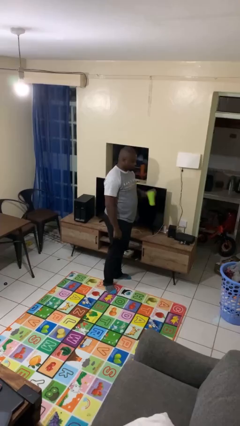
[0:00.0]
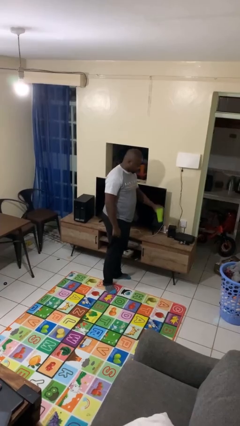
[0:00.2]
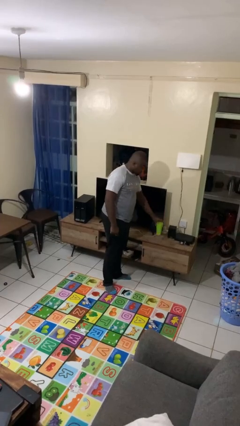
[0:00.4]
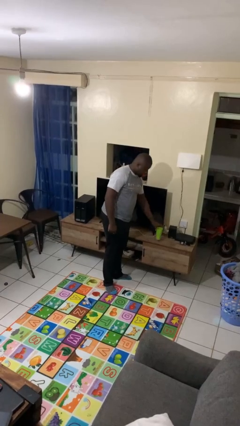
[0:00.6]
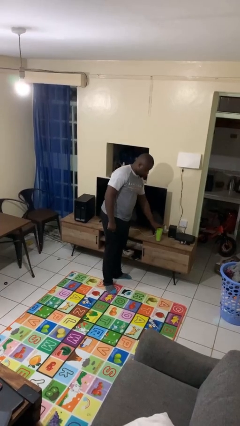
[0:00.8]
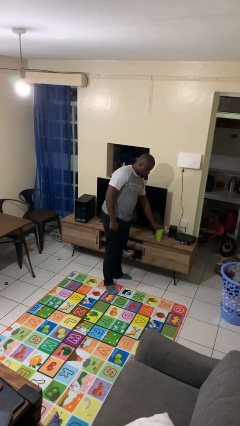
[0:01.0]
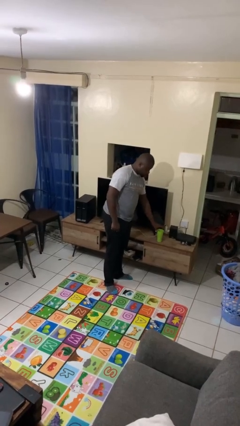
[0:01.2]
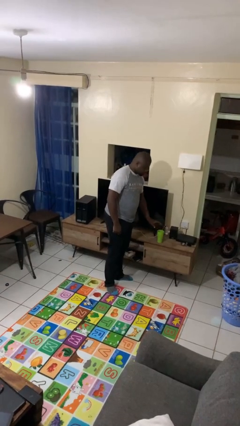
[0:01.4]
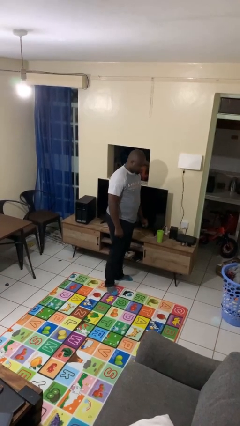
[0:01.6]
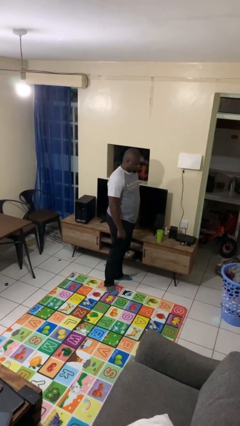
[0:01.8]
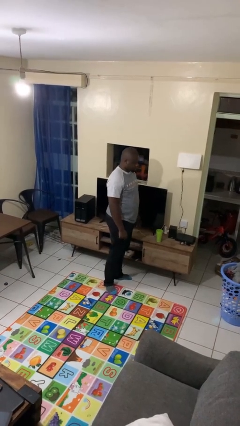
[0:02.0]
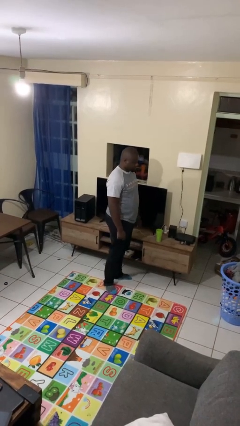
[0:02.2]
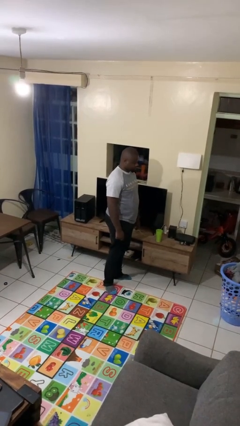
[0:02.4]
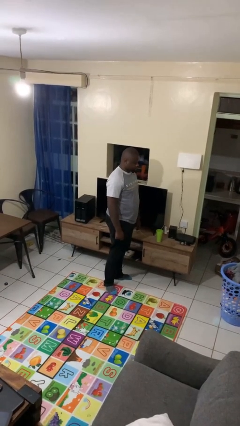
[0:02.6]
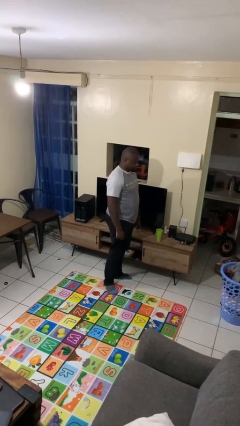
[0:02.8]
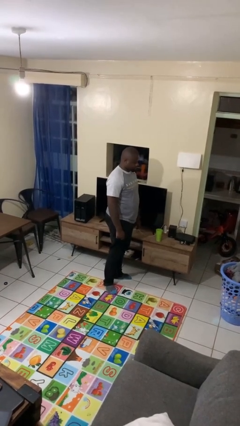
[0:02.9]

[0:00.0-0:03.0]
person puts down object on countertop

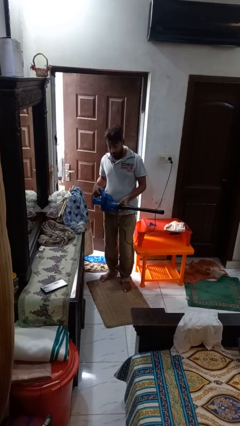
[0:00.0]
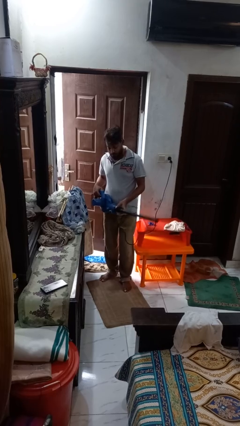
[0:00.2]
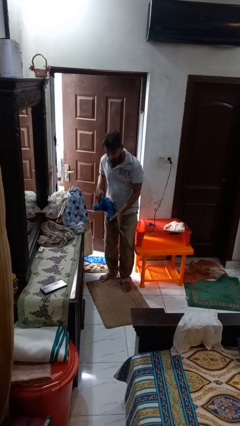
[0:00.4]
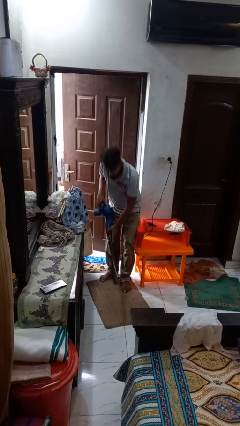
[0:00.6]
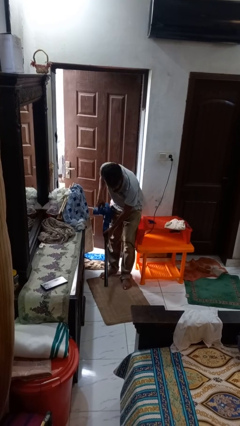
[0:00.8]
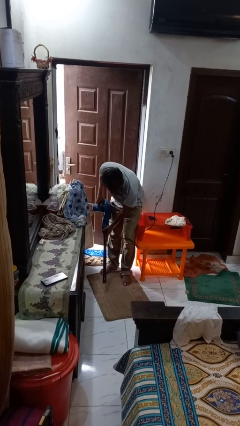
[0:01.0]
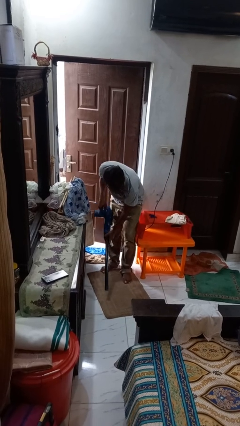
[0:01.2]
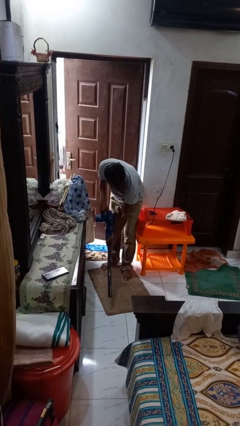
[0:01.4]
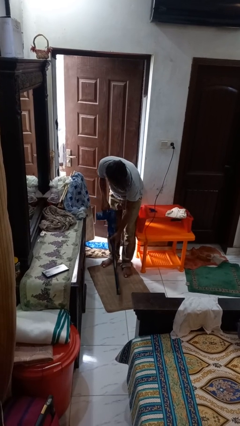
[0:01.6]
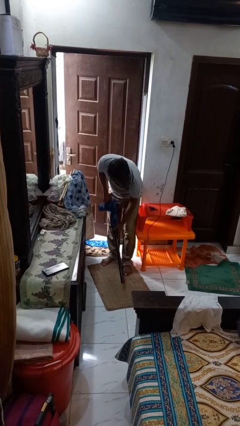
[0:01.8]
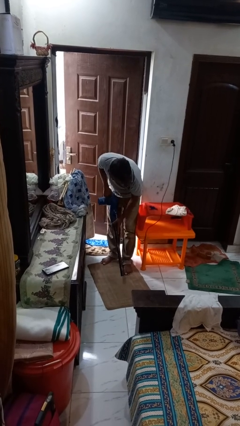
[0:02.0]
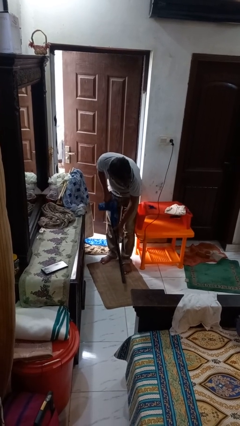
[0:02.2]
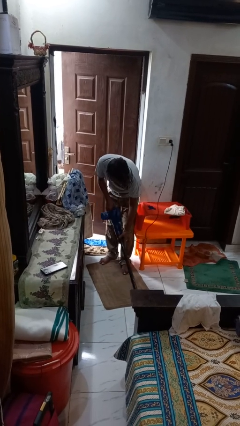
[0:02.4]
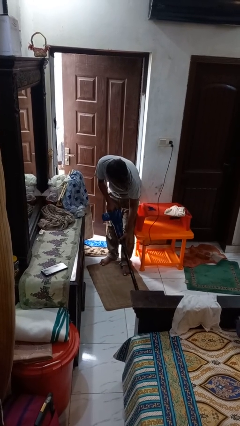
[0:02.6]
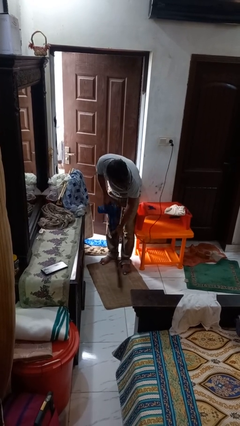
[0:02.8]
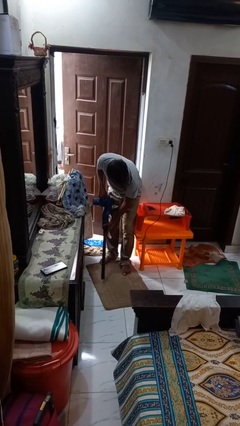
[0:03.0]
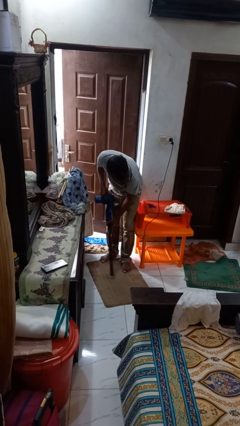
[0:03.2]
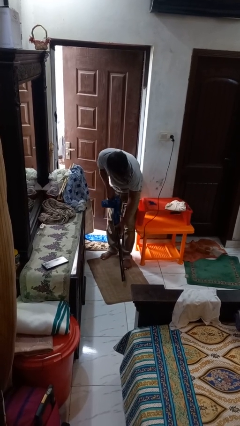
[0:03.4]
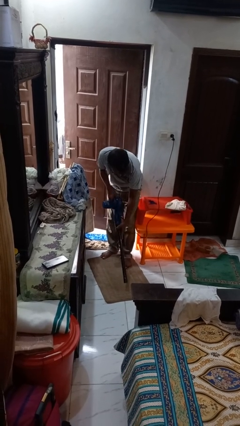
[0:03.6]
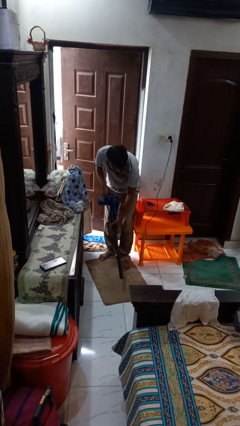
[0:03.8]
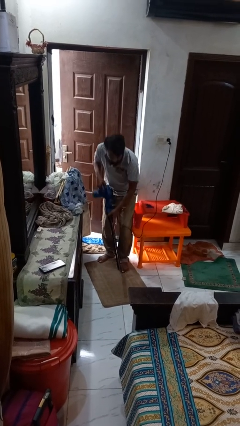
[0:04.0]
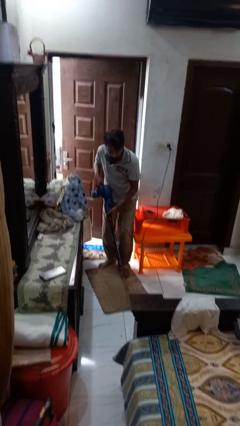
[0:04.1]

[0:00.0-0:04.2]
person vacuums carpet

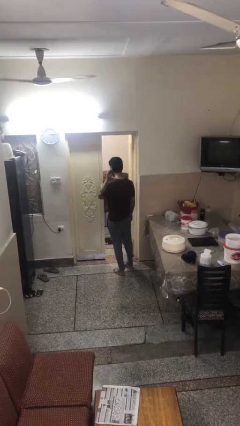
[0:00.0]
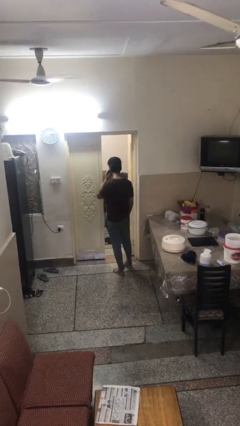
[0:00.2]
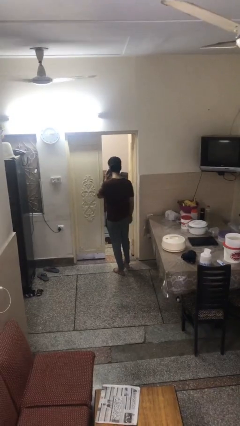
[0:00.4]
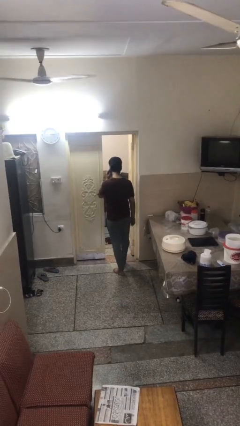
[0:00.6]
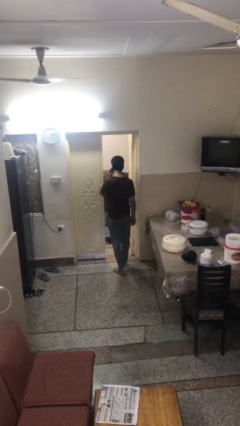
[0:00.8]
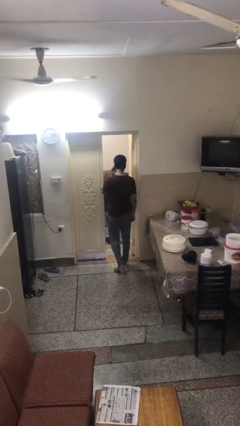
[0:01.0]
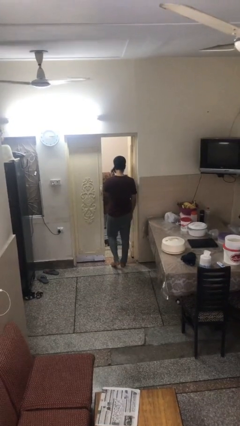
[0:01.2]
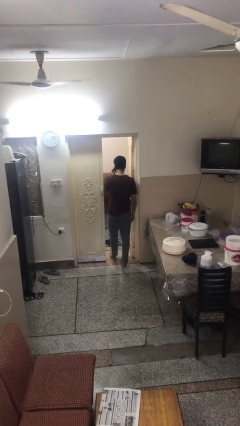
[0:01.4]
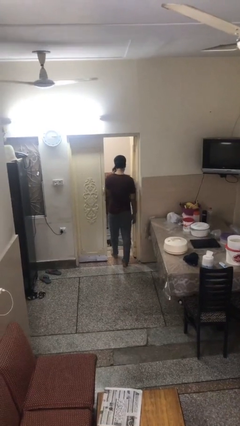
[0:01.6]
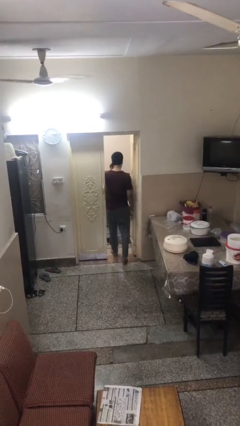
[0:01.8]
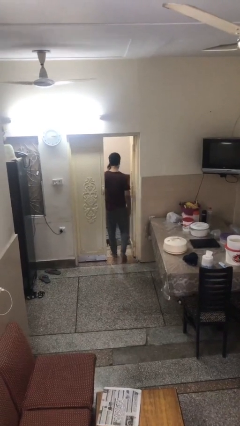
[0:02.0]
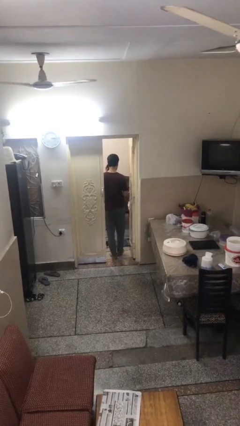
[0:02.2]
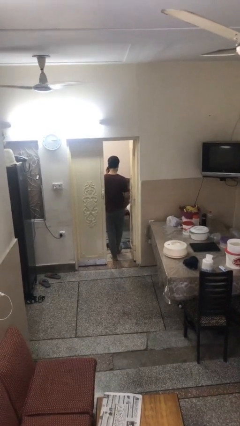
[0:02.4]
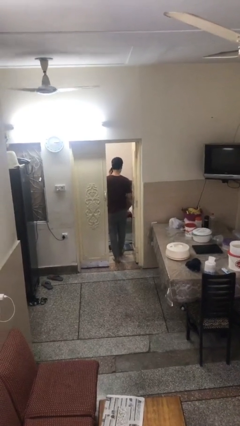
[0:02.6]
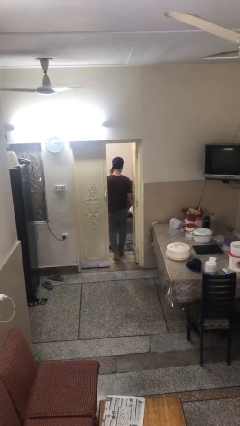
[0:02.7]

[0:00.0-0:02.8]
person exits scene through structure

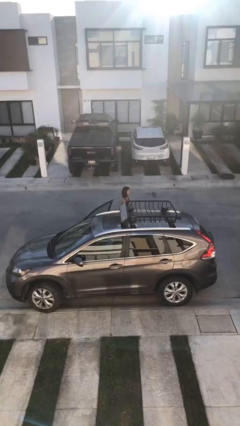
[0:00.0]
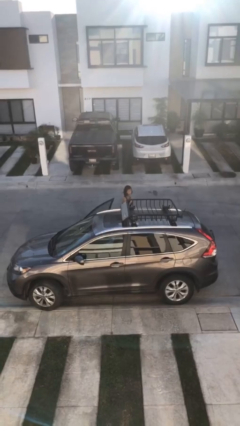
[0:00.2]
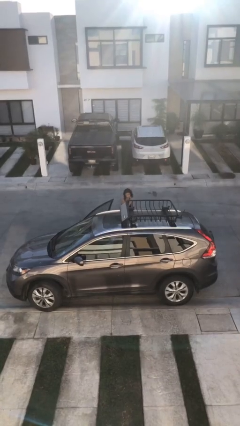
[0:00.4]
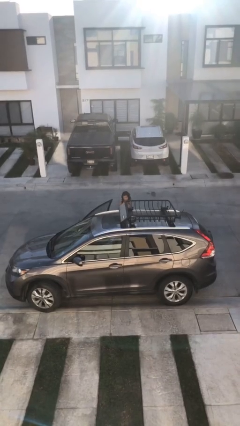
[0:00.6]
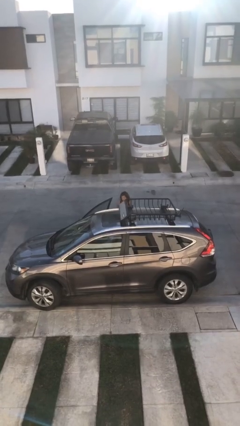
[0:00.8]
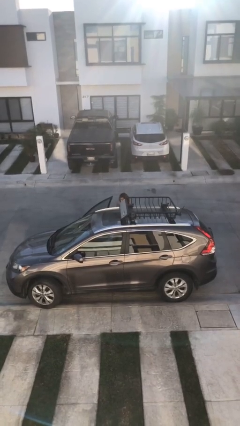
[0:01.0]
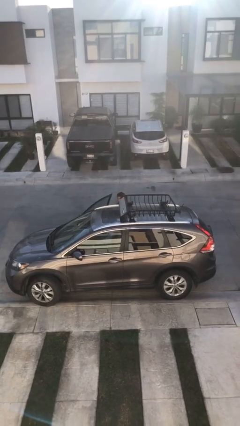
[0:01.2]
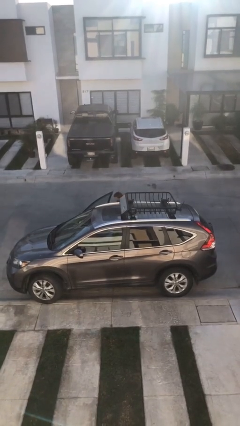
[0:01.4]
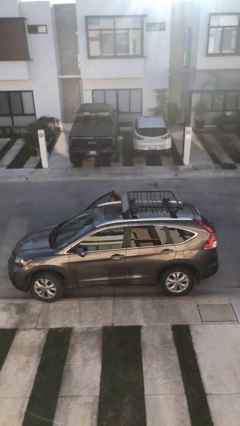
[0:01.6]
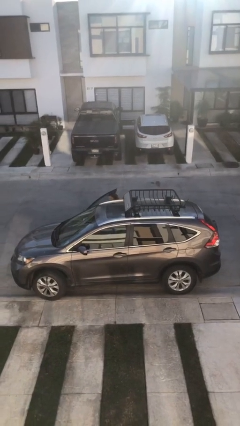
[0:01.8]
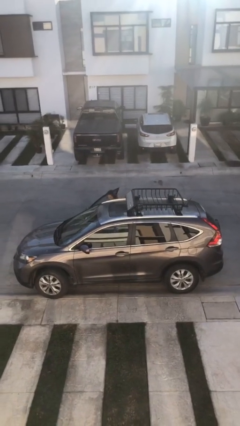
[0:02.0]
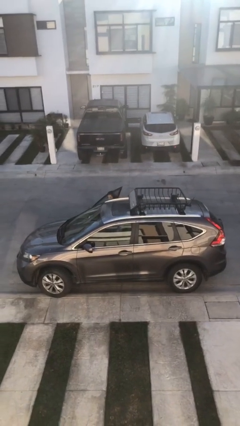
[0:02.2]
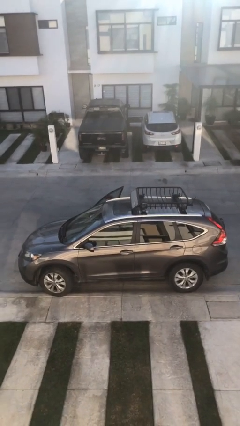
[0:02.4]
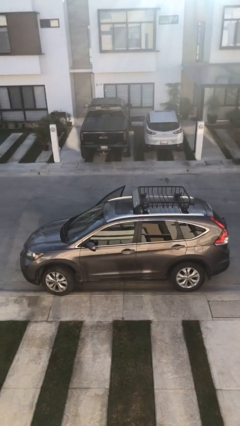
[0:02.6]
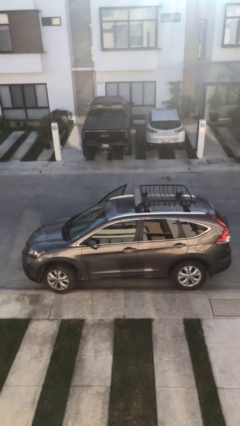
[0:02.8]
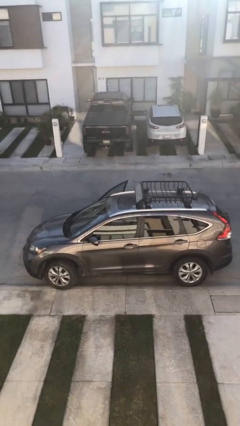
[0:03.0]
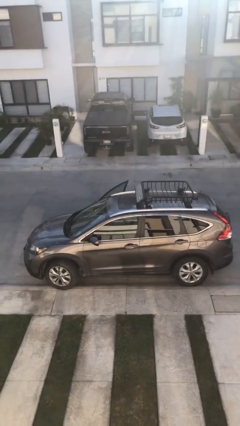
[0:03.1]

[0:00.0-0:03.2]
person enters car

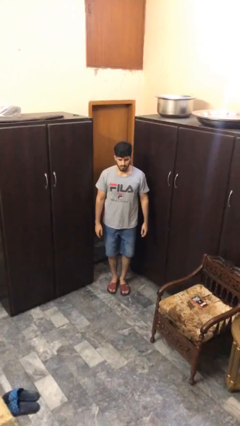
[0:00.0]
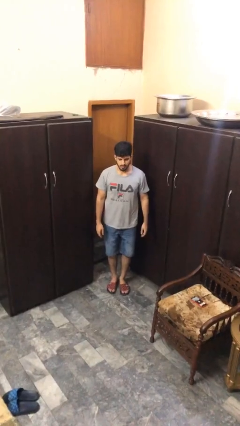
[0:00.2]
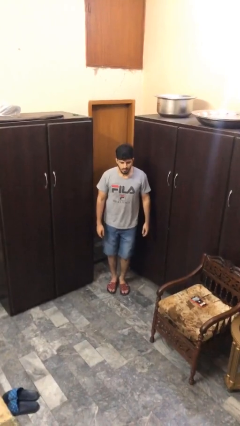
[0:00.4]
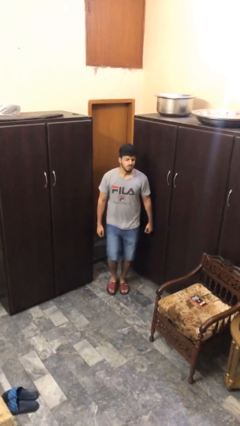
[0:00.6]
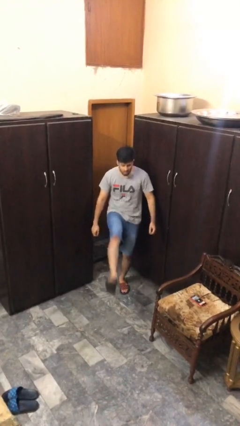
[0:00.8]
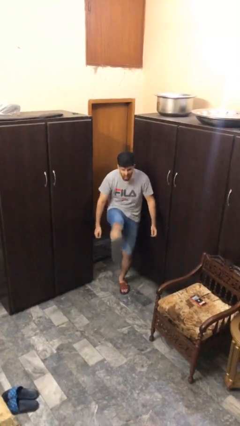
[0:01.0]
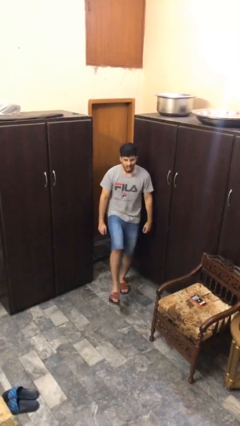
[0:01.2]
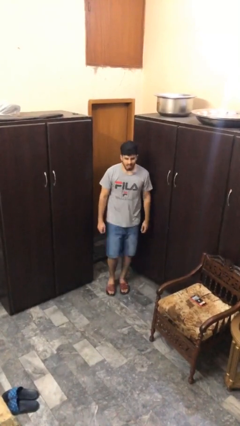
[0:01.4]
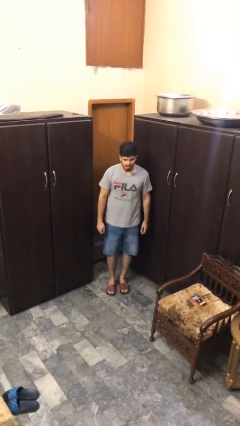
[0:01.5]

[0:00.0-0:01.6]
person karate kicks

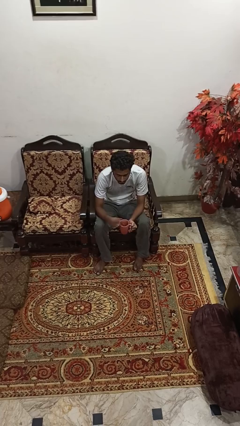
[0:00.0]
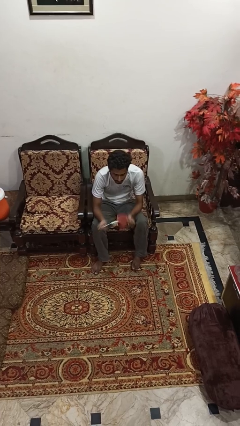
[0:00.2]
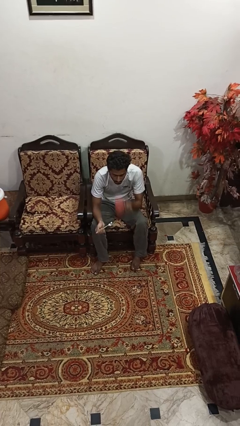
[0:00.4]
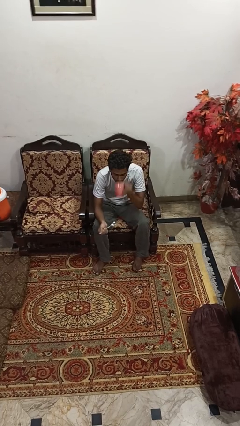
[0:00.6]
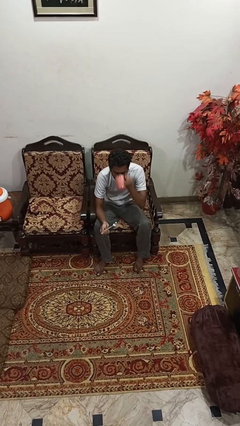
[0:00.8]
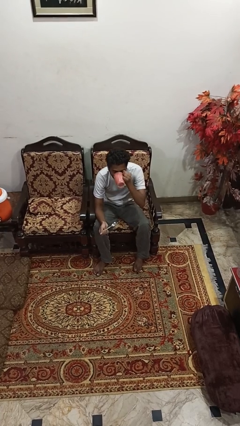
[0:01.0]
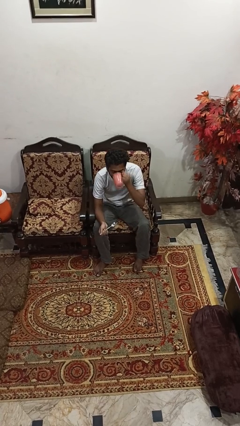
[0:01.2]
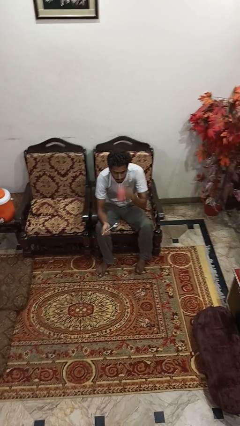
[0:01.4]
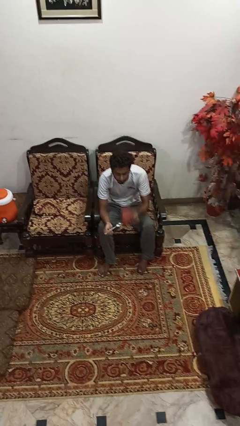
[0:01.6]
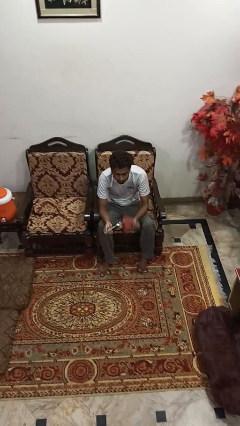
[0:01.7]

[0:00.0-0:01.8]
person drinks from mug

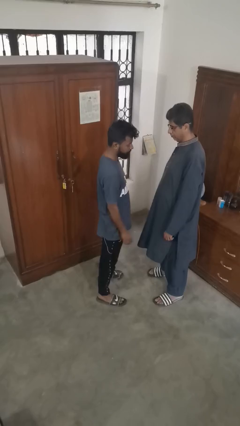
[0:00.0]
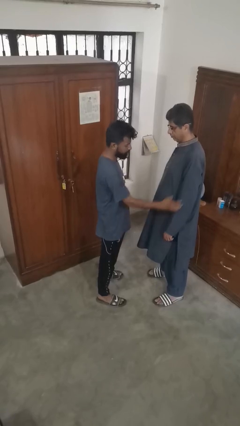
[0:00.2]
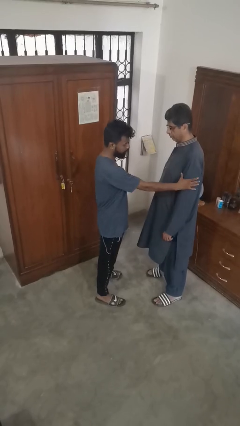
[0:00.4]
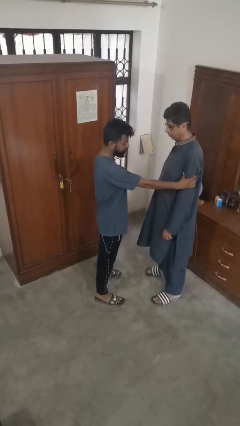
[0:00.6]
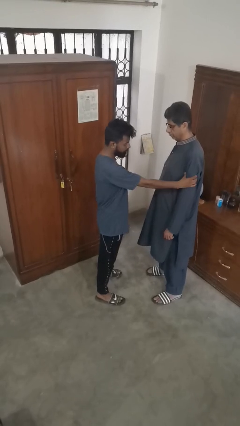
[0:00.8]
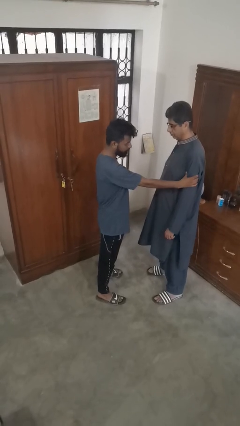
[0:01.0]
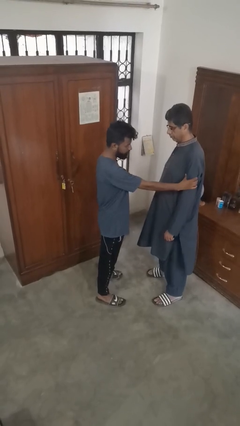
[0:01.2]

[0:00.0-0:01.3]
person grabs person by bicep
